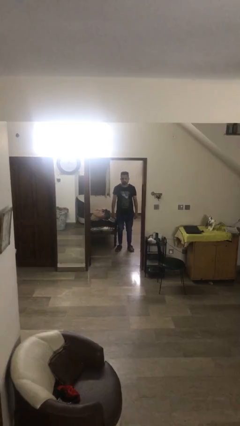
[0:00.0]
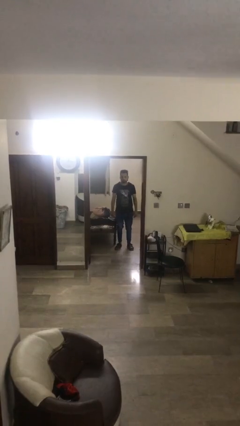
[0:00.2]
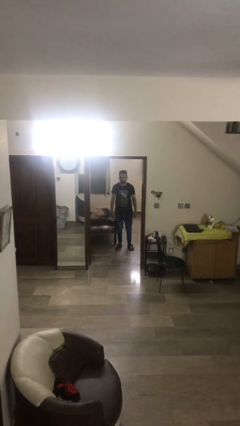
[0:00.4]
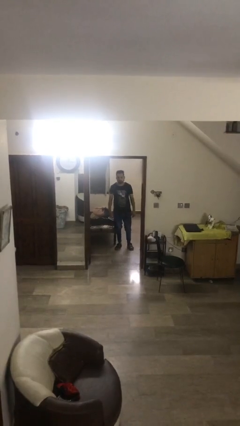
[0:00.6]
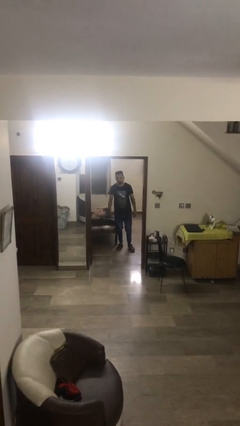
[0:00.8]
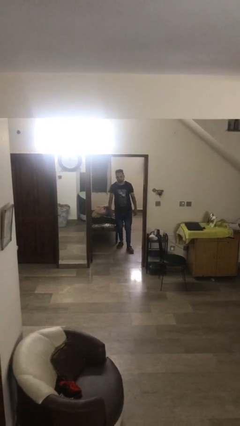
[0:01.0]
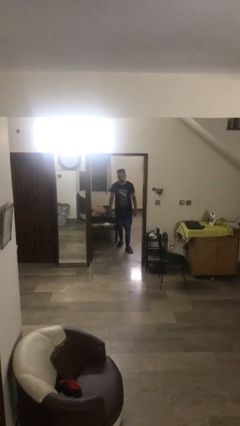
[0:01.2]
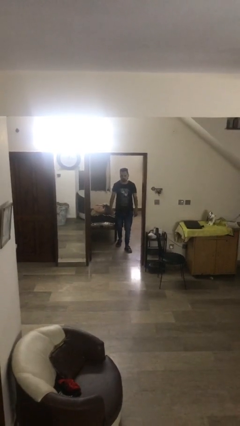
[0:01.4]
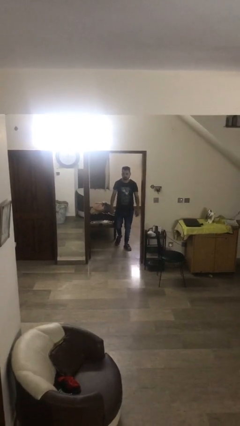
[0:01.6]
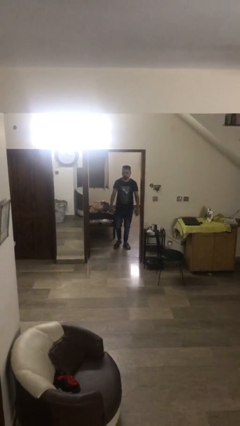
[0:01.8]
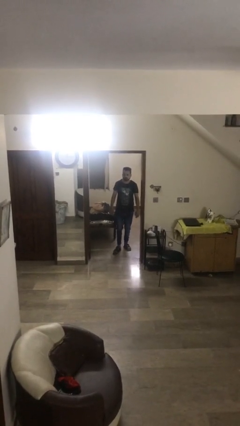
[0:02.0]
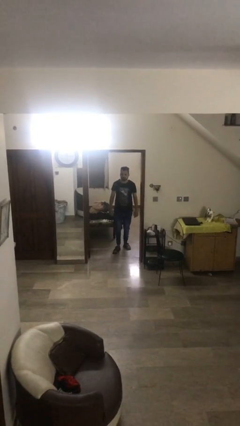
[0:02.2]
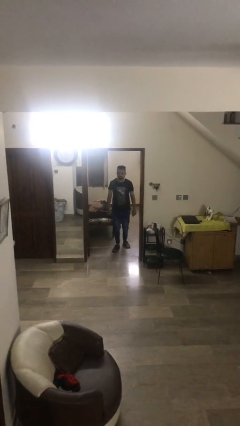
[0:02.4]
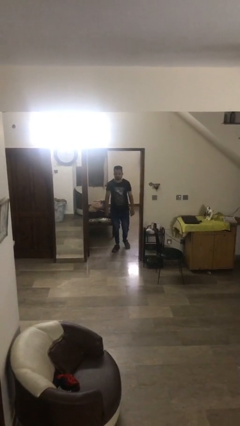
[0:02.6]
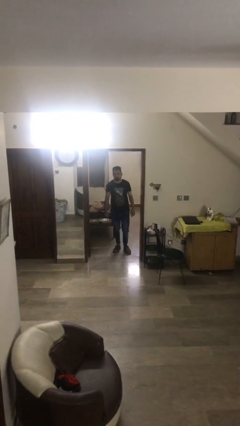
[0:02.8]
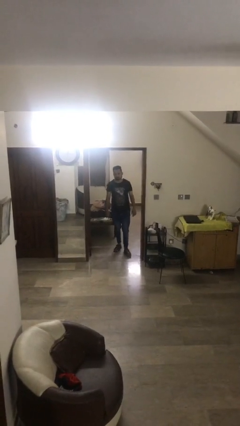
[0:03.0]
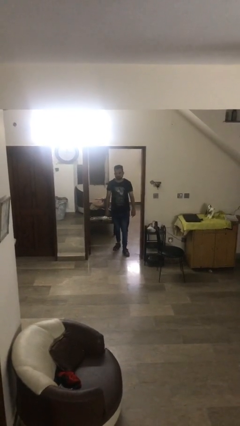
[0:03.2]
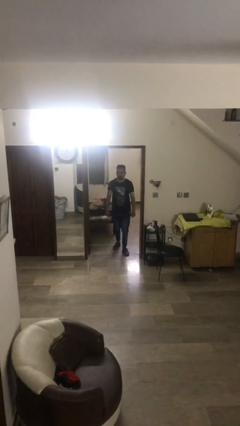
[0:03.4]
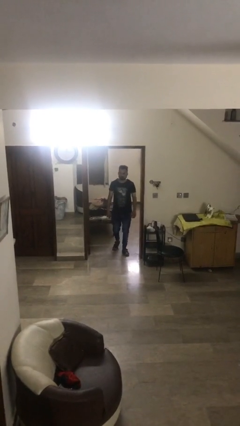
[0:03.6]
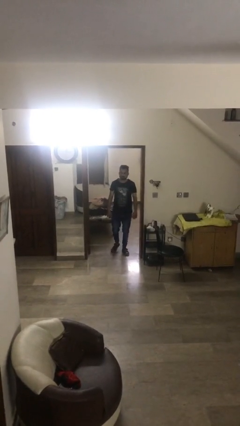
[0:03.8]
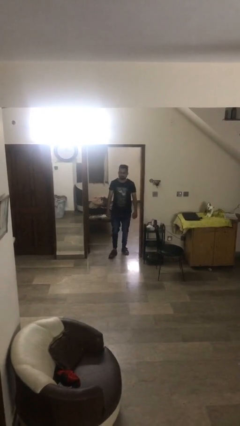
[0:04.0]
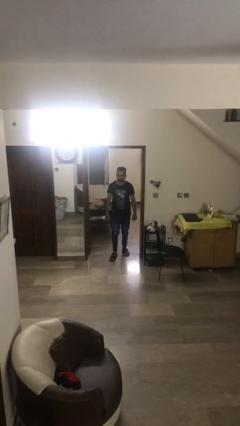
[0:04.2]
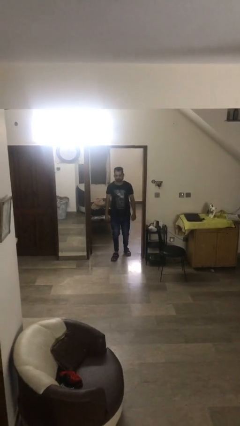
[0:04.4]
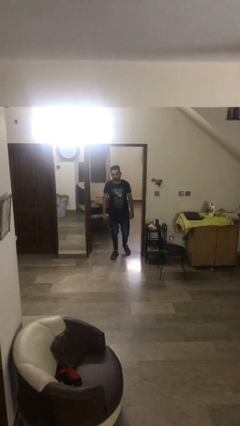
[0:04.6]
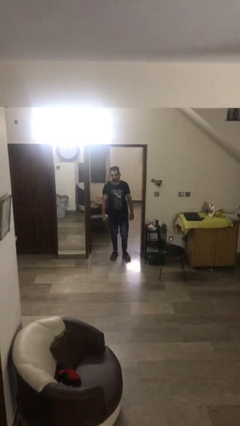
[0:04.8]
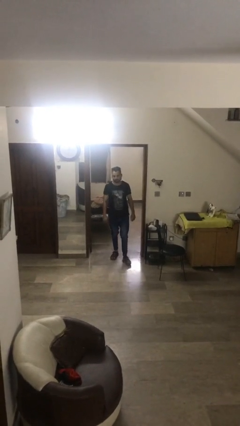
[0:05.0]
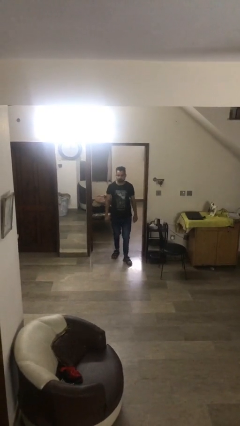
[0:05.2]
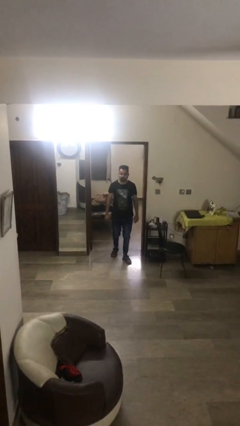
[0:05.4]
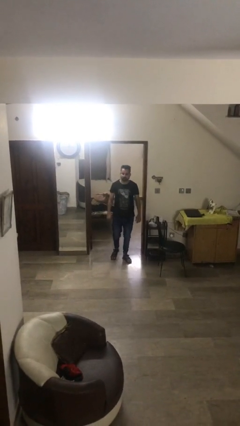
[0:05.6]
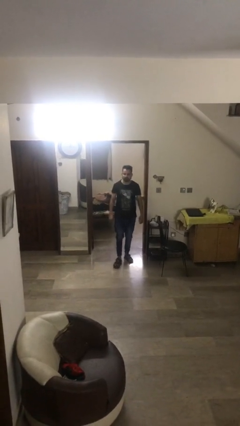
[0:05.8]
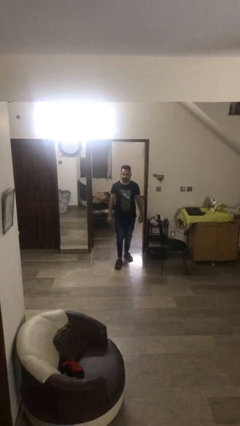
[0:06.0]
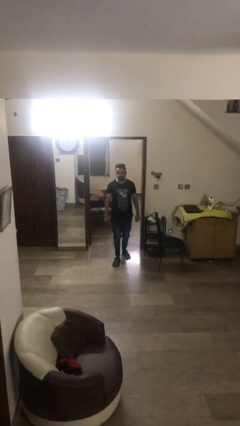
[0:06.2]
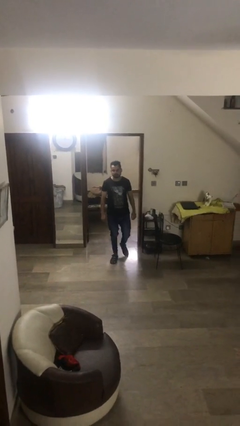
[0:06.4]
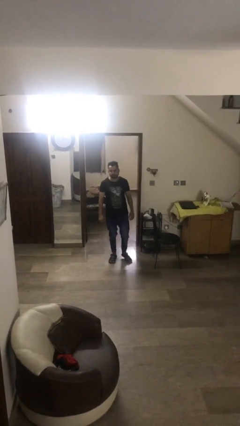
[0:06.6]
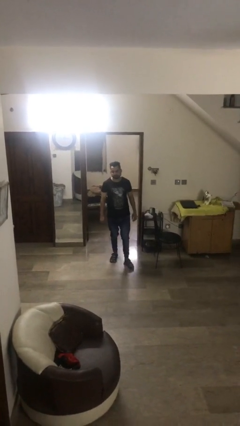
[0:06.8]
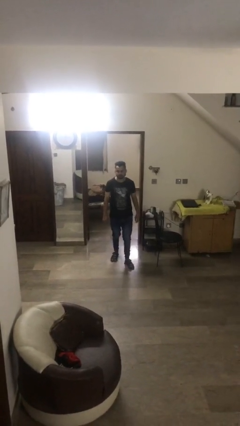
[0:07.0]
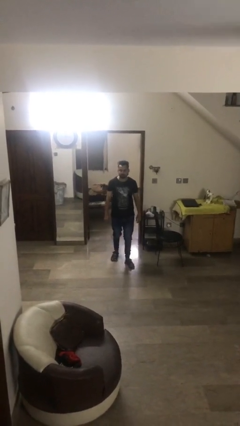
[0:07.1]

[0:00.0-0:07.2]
person enters scene through structure

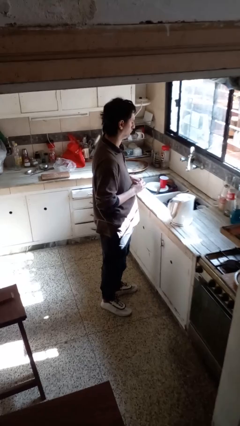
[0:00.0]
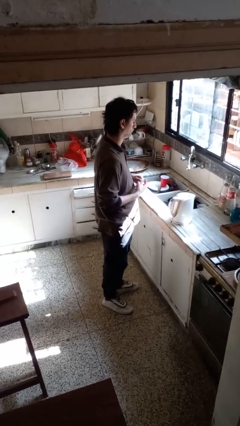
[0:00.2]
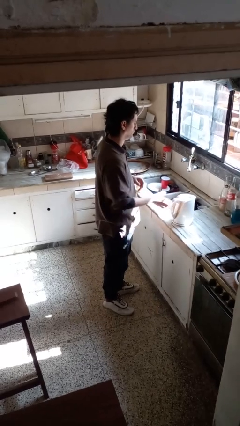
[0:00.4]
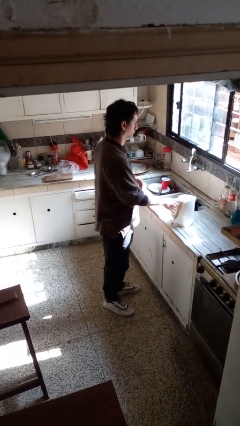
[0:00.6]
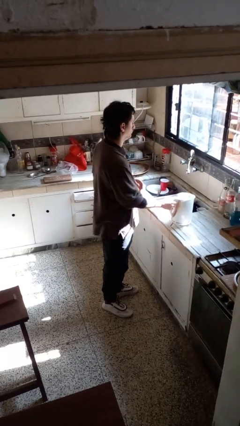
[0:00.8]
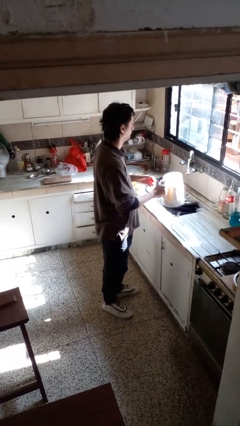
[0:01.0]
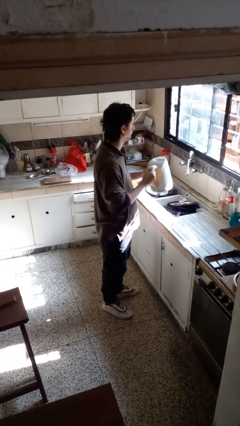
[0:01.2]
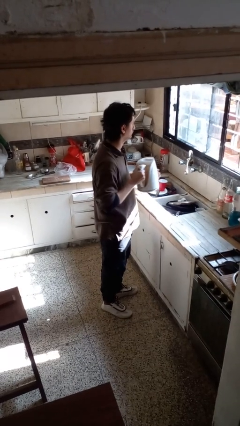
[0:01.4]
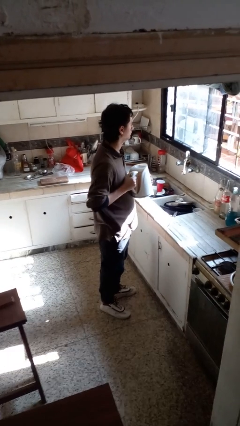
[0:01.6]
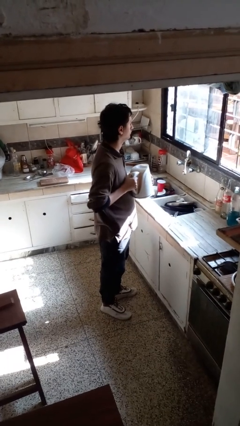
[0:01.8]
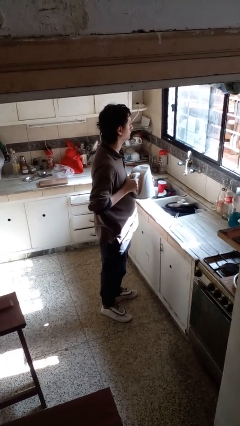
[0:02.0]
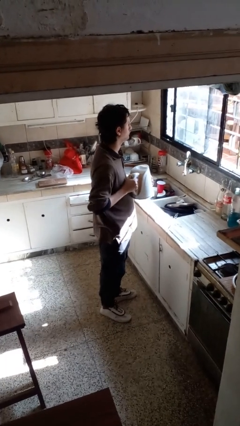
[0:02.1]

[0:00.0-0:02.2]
person picks up object from countertop

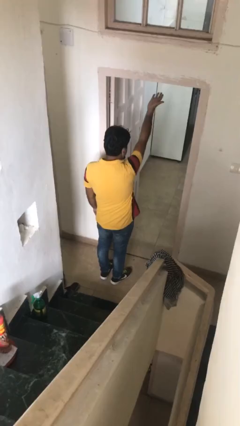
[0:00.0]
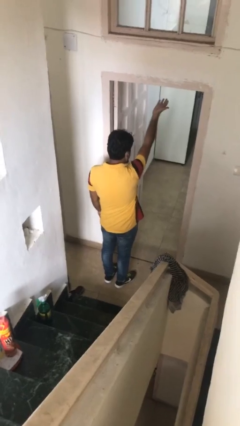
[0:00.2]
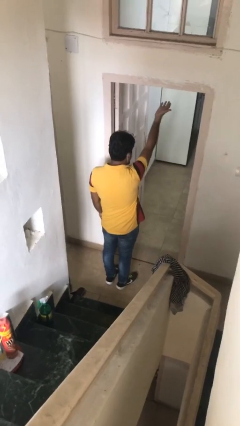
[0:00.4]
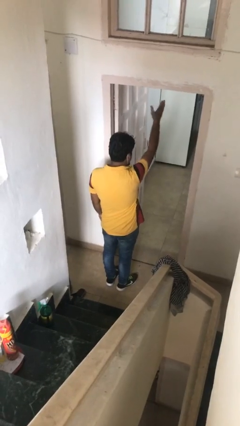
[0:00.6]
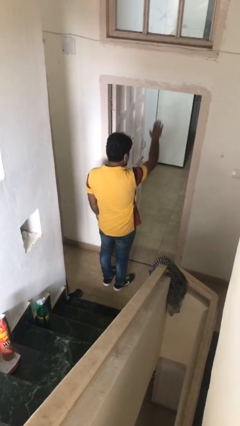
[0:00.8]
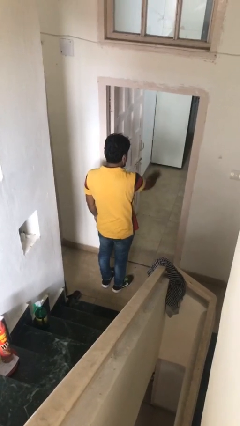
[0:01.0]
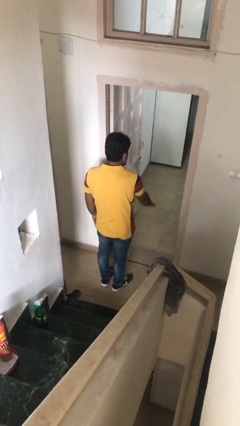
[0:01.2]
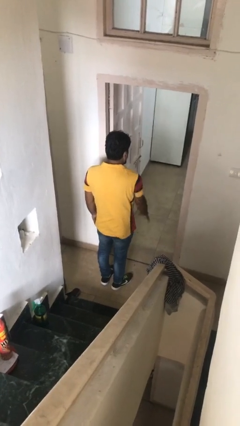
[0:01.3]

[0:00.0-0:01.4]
person gestures swipe down

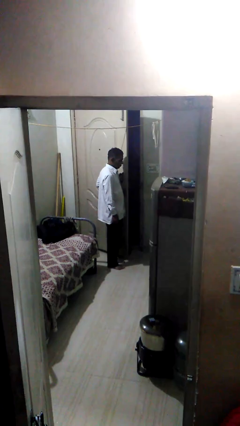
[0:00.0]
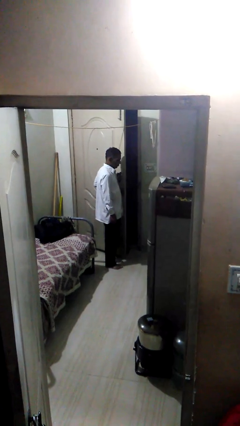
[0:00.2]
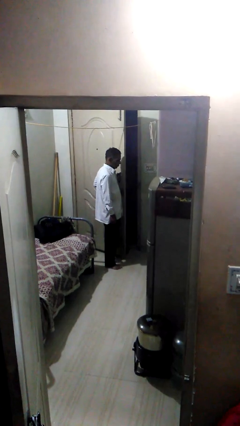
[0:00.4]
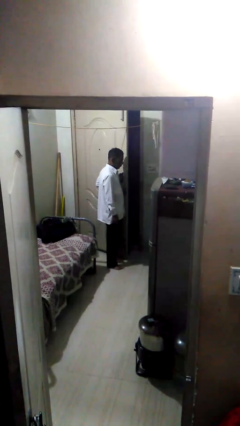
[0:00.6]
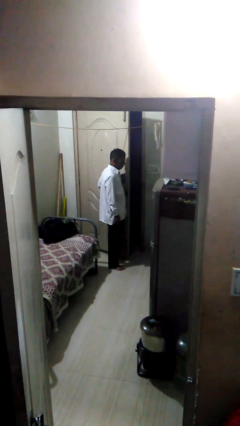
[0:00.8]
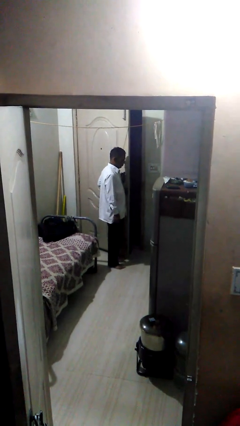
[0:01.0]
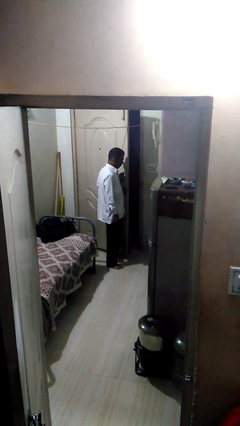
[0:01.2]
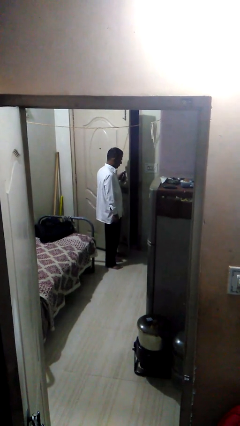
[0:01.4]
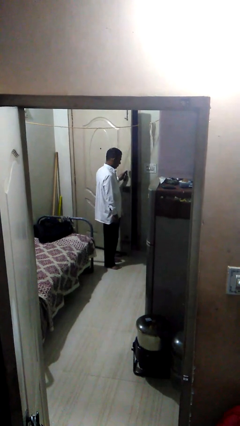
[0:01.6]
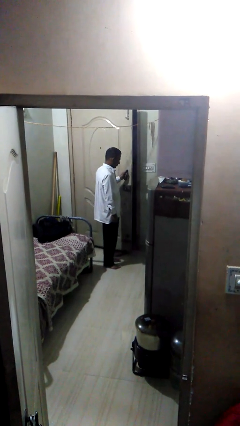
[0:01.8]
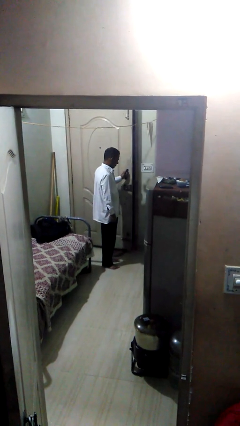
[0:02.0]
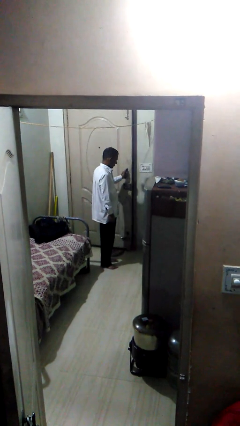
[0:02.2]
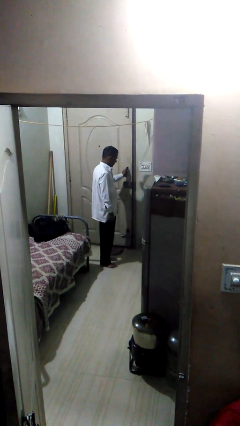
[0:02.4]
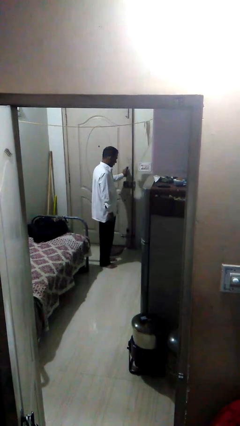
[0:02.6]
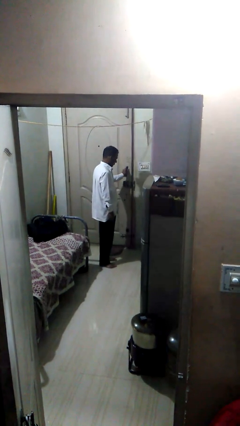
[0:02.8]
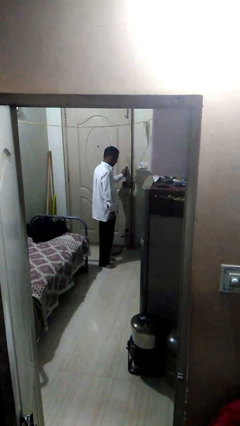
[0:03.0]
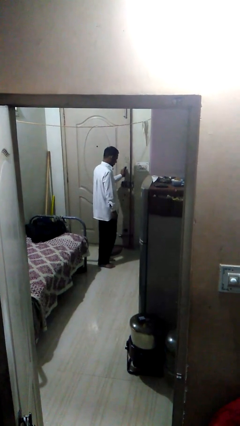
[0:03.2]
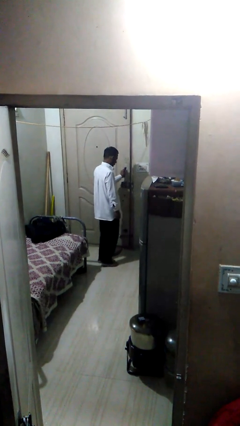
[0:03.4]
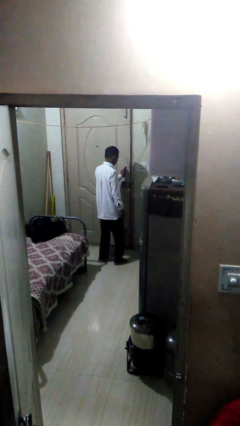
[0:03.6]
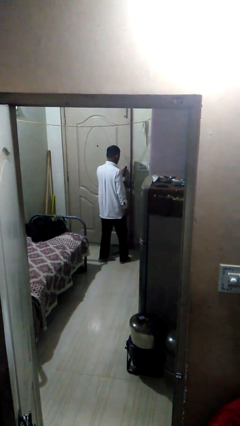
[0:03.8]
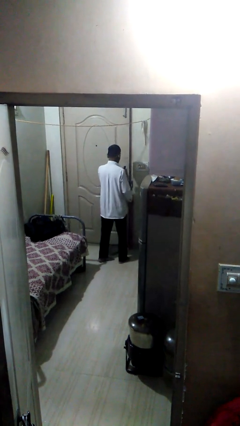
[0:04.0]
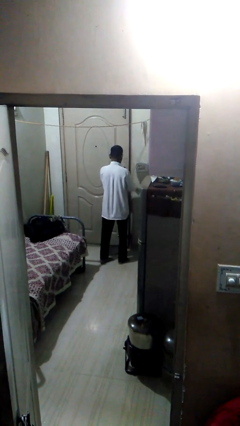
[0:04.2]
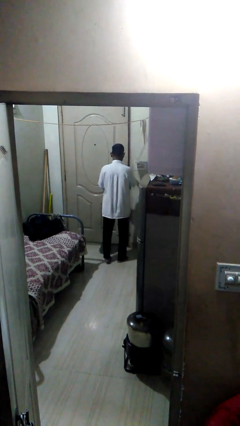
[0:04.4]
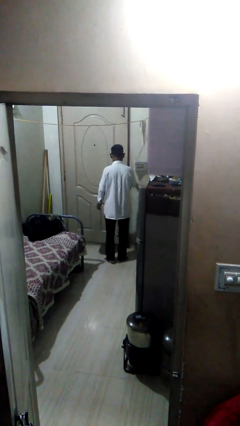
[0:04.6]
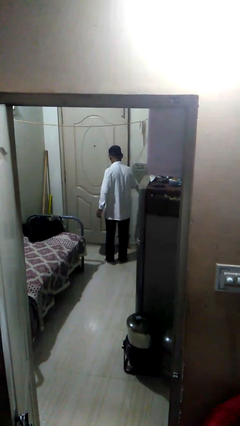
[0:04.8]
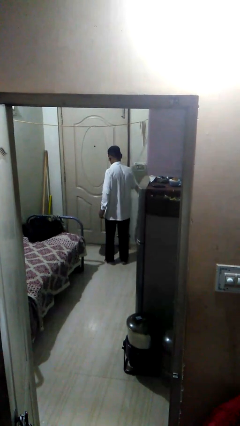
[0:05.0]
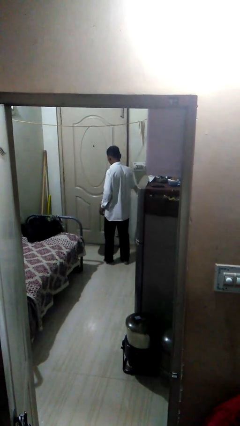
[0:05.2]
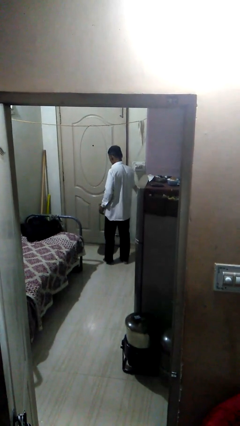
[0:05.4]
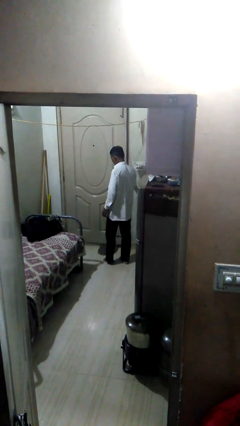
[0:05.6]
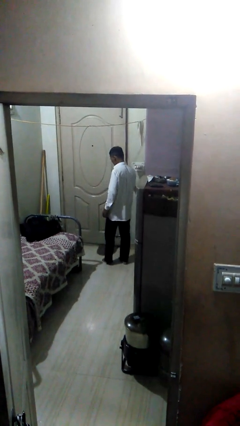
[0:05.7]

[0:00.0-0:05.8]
person closes facility door

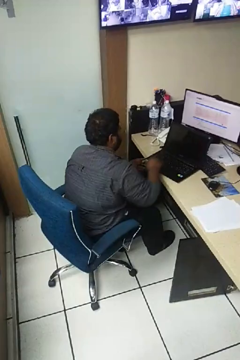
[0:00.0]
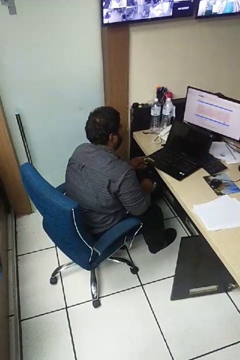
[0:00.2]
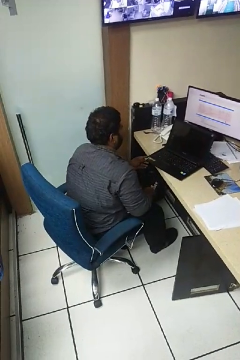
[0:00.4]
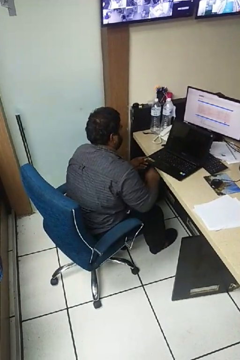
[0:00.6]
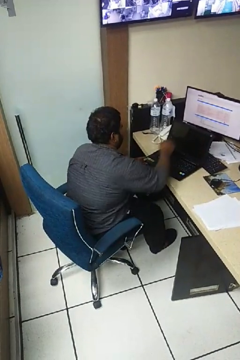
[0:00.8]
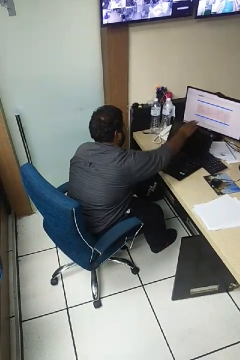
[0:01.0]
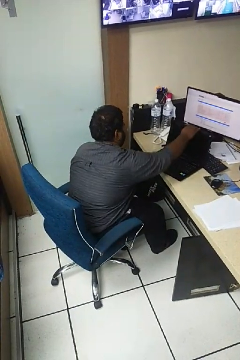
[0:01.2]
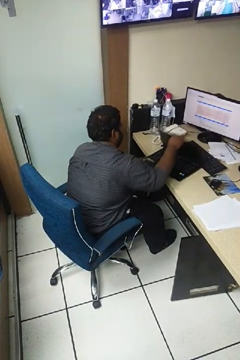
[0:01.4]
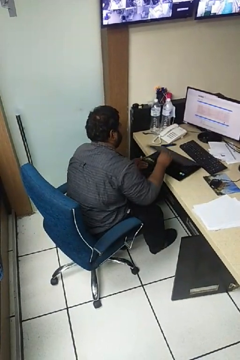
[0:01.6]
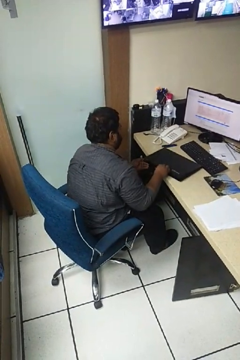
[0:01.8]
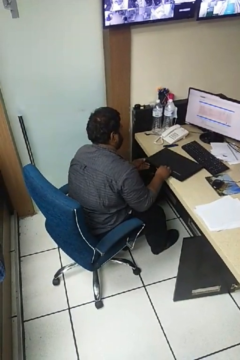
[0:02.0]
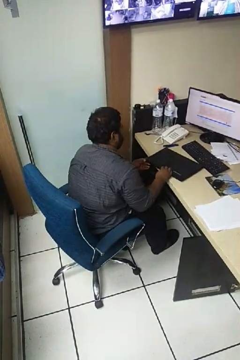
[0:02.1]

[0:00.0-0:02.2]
person closes laptop
